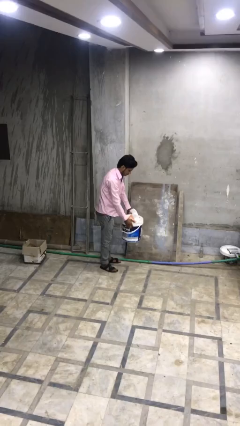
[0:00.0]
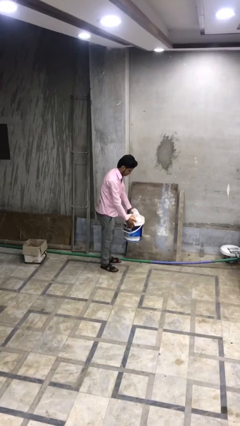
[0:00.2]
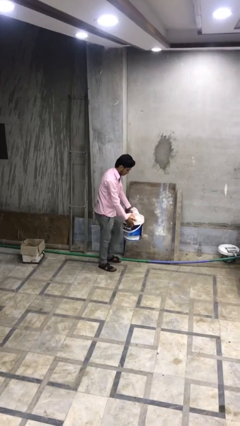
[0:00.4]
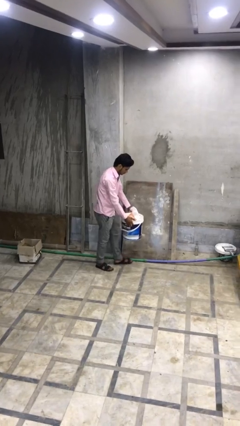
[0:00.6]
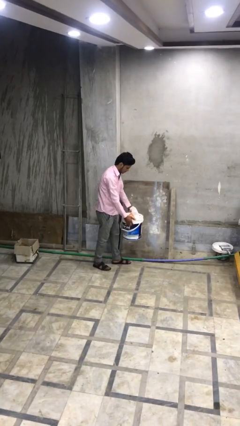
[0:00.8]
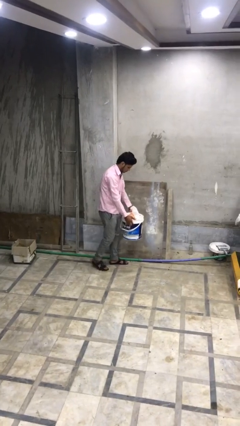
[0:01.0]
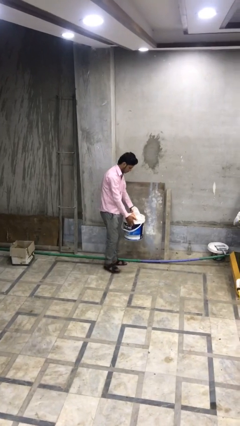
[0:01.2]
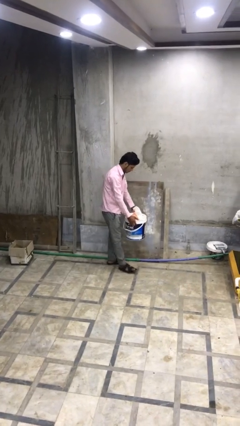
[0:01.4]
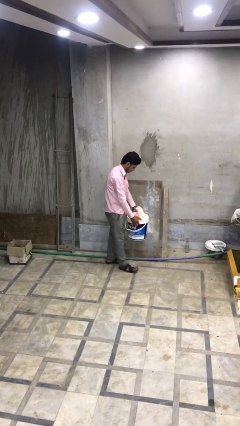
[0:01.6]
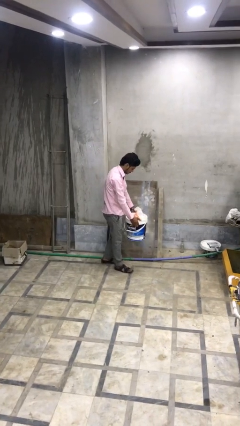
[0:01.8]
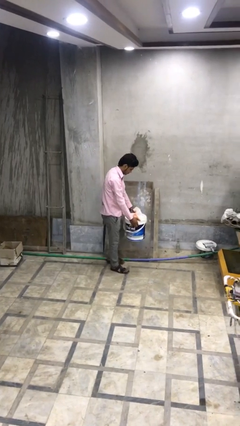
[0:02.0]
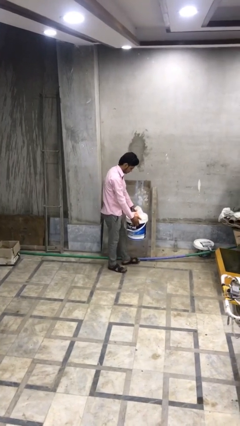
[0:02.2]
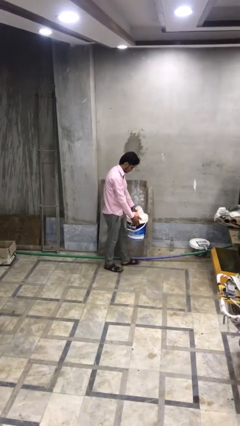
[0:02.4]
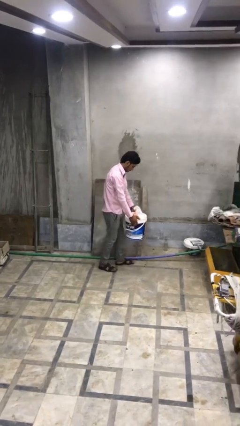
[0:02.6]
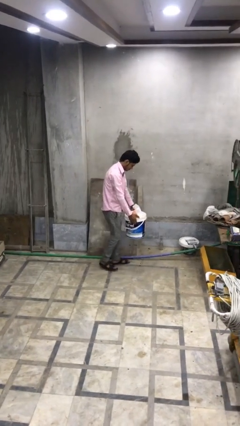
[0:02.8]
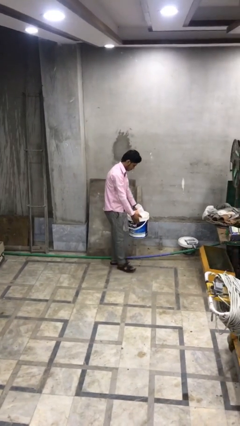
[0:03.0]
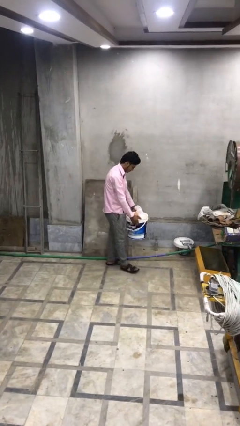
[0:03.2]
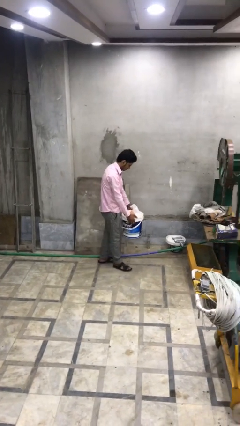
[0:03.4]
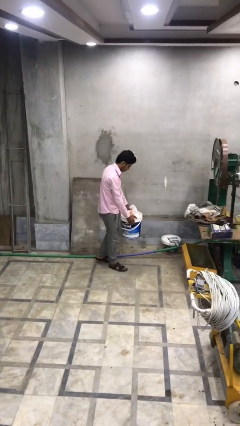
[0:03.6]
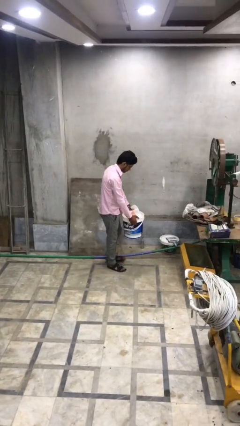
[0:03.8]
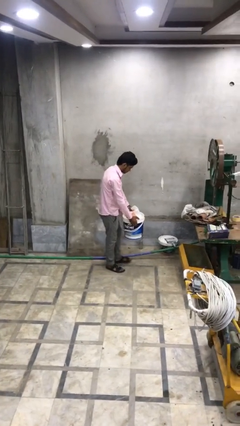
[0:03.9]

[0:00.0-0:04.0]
person carries heavy object

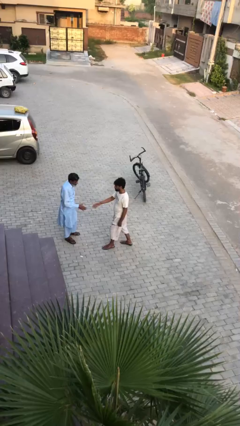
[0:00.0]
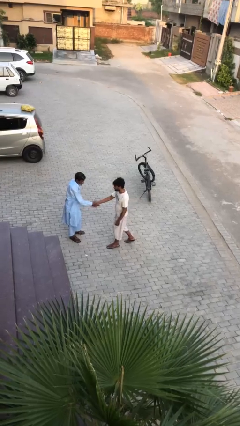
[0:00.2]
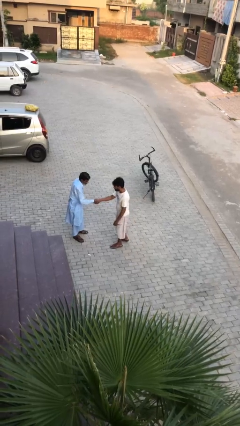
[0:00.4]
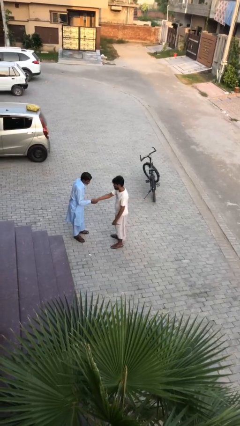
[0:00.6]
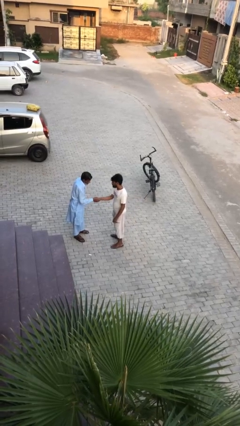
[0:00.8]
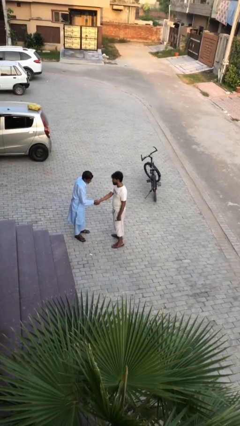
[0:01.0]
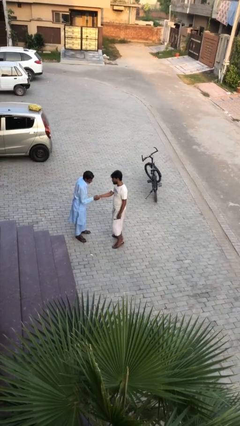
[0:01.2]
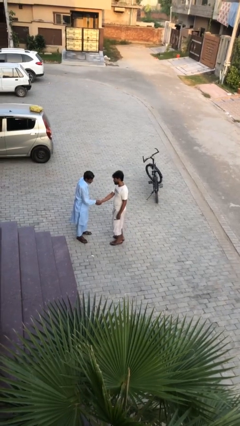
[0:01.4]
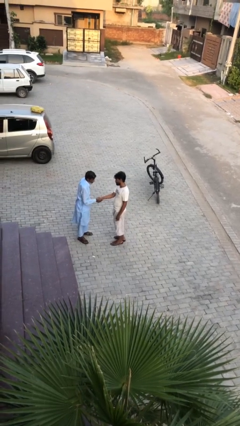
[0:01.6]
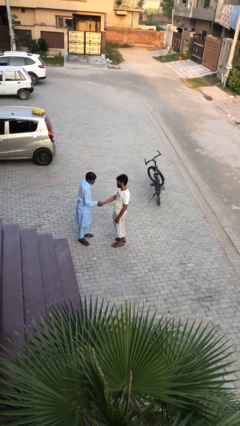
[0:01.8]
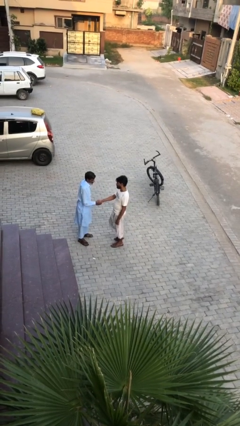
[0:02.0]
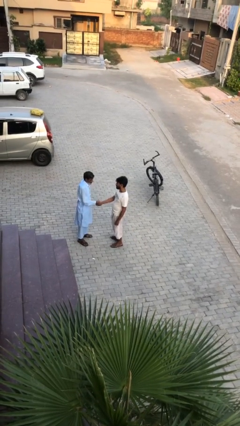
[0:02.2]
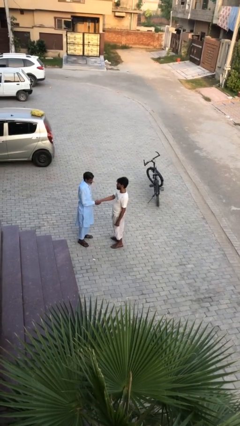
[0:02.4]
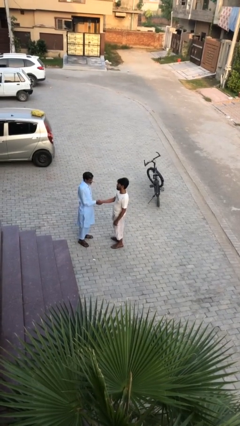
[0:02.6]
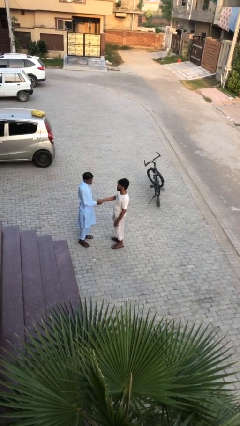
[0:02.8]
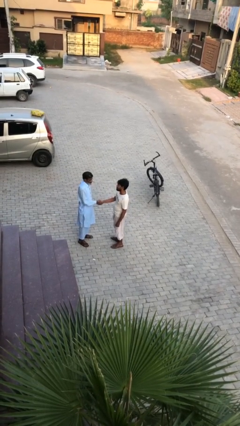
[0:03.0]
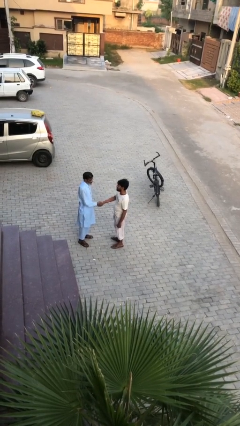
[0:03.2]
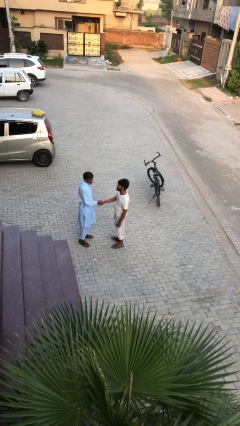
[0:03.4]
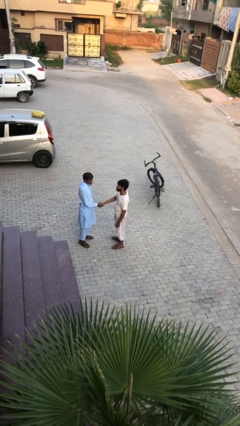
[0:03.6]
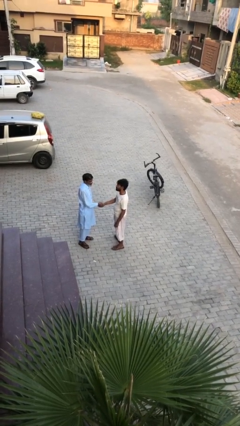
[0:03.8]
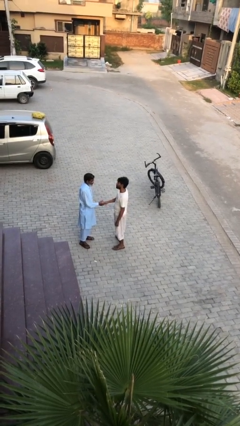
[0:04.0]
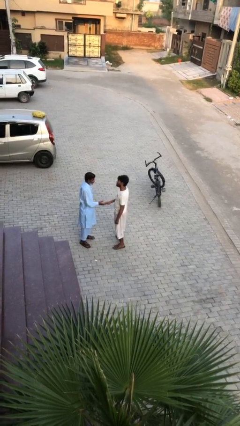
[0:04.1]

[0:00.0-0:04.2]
person shakes hand

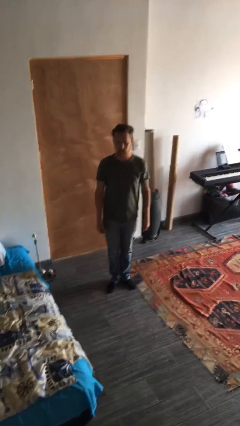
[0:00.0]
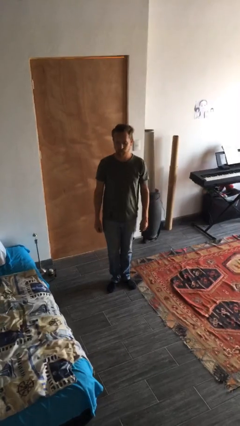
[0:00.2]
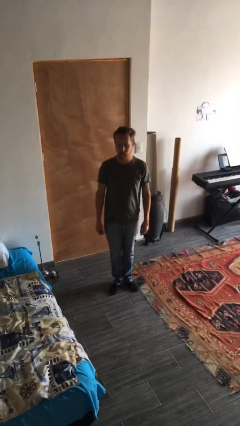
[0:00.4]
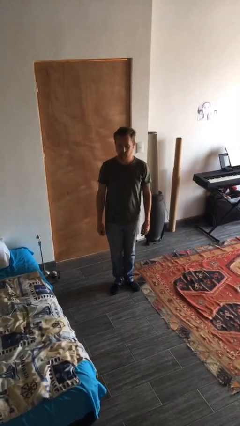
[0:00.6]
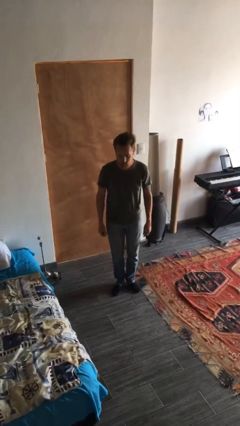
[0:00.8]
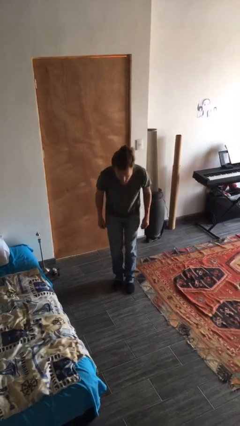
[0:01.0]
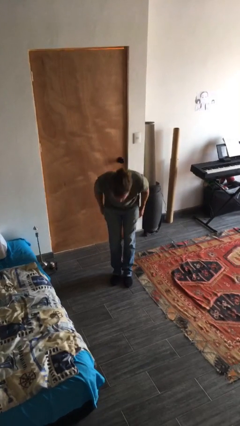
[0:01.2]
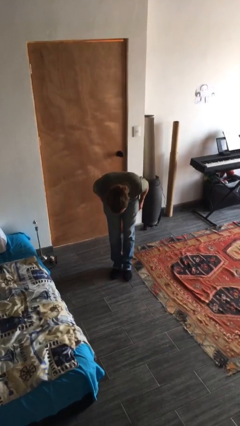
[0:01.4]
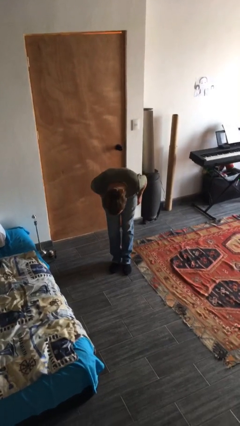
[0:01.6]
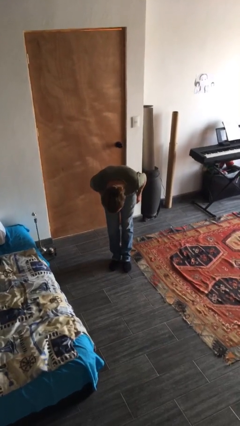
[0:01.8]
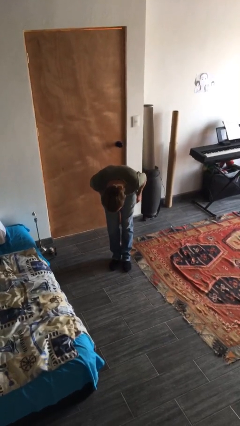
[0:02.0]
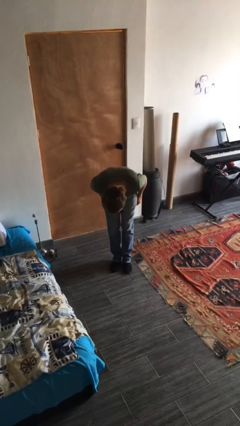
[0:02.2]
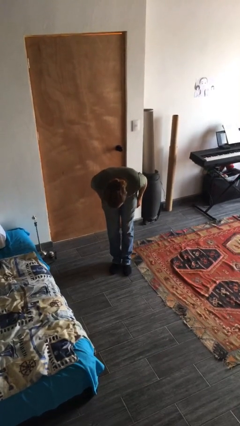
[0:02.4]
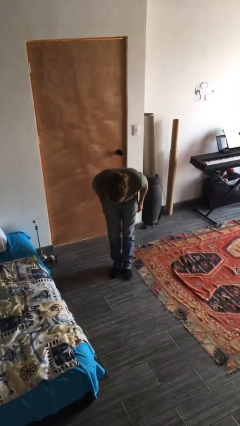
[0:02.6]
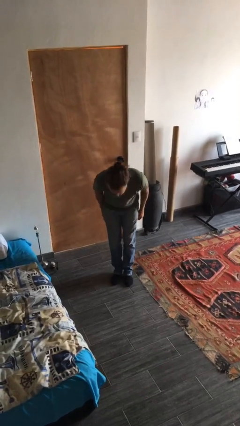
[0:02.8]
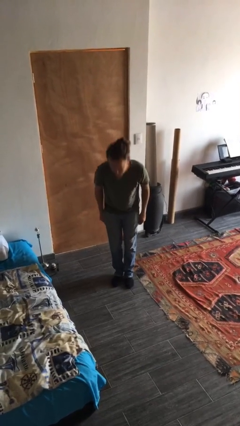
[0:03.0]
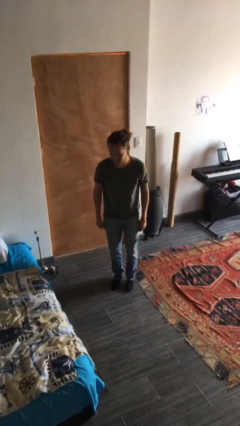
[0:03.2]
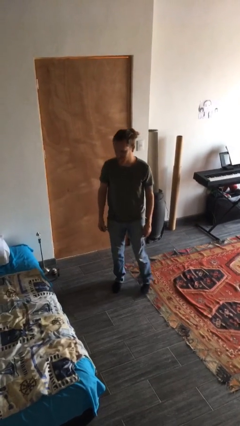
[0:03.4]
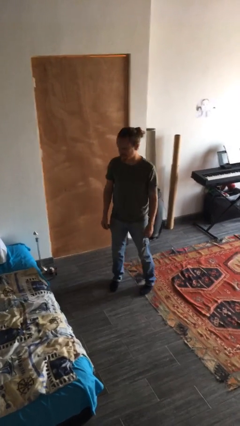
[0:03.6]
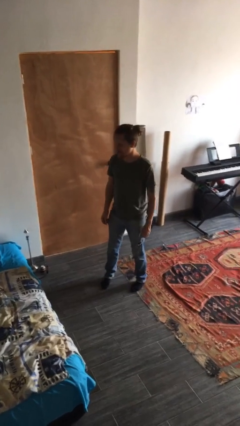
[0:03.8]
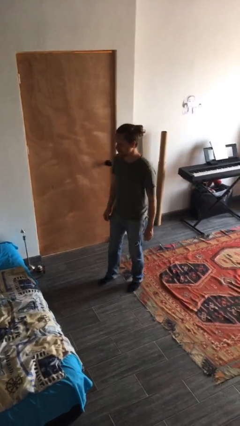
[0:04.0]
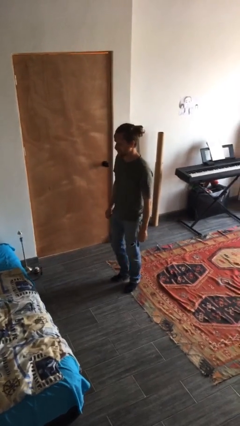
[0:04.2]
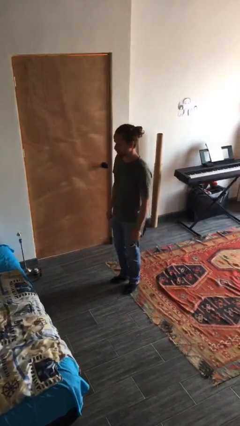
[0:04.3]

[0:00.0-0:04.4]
person bows

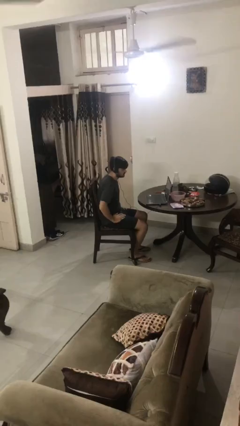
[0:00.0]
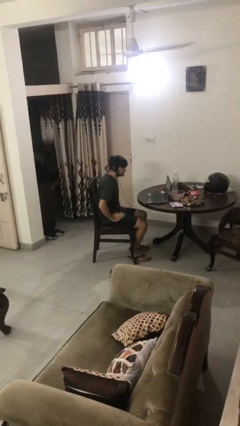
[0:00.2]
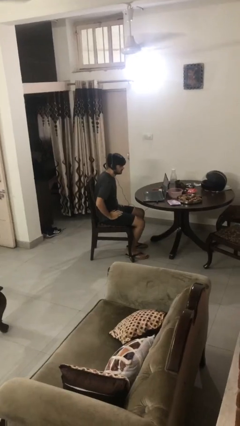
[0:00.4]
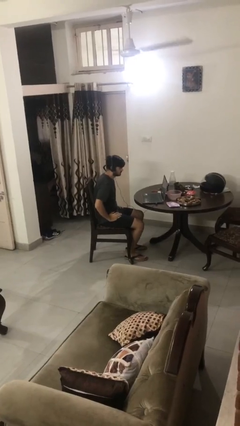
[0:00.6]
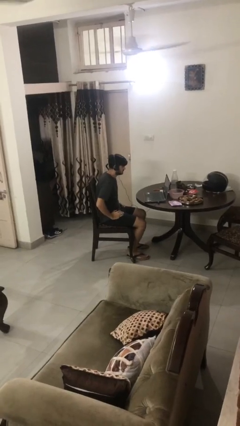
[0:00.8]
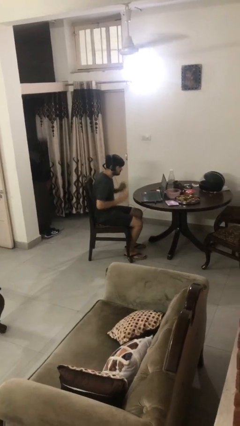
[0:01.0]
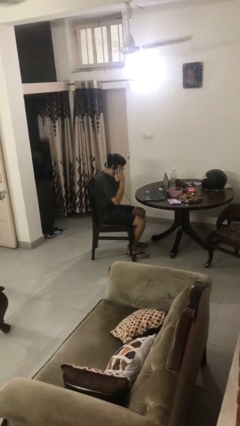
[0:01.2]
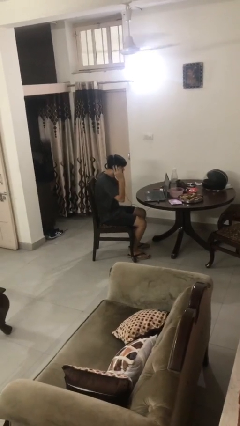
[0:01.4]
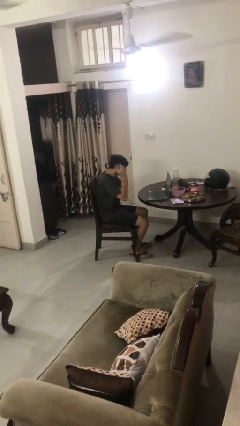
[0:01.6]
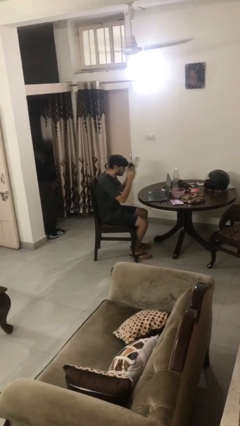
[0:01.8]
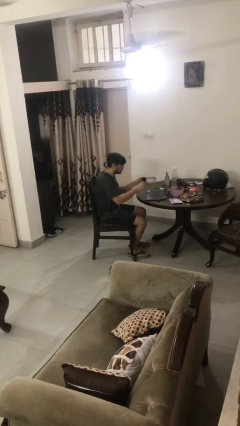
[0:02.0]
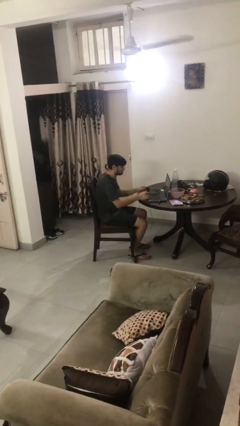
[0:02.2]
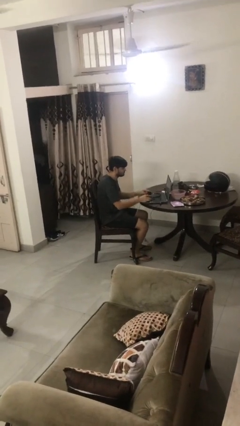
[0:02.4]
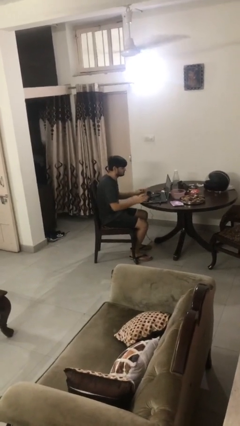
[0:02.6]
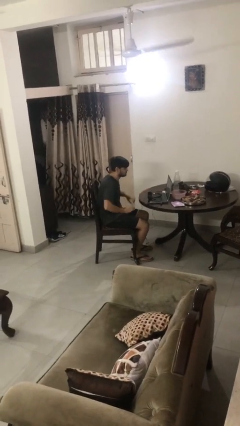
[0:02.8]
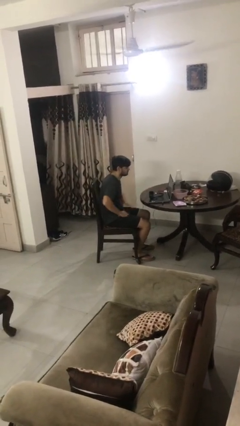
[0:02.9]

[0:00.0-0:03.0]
person takes off headphones

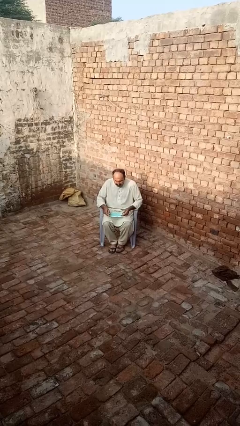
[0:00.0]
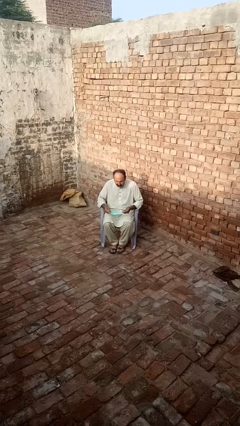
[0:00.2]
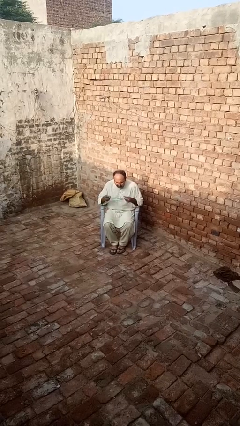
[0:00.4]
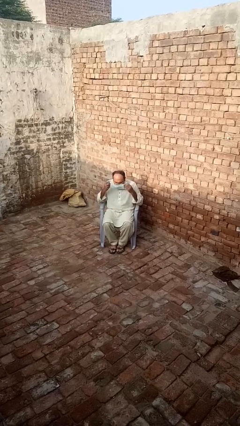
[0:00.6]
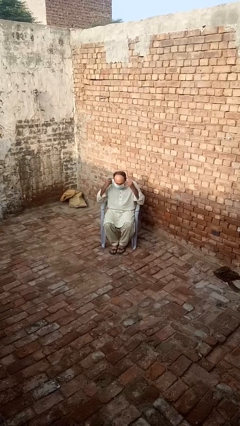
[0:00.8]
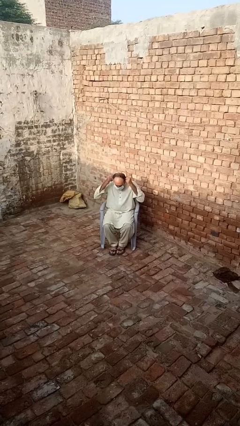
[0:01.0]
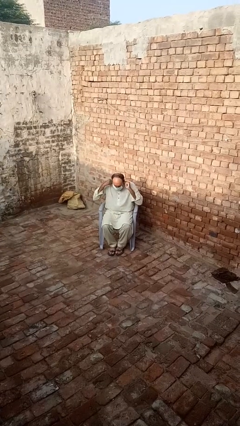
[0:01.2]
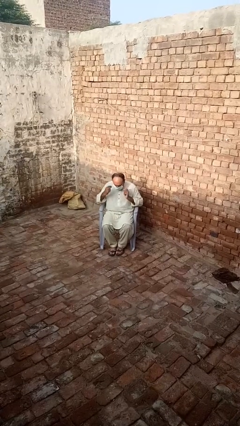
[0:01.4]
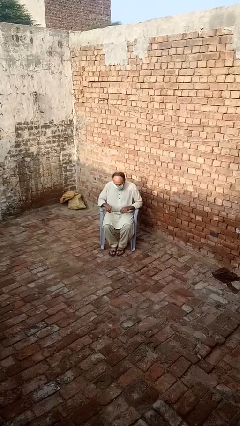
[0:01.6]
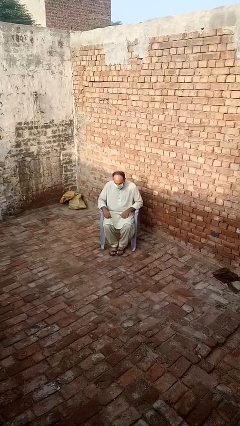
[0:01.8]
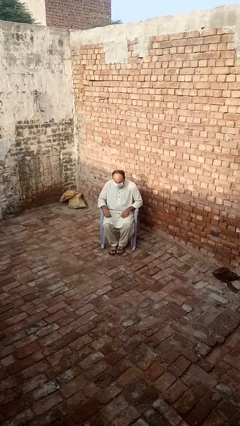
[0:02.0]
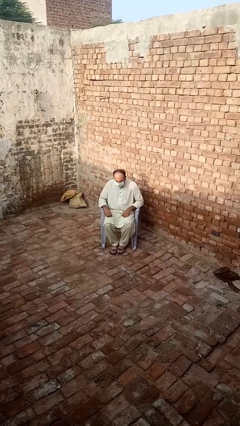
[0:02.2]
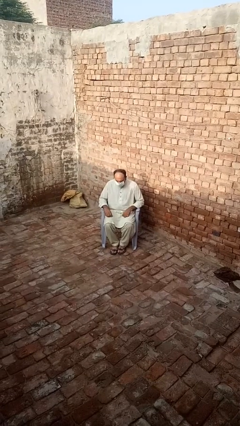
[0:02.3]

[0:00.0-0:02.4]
person puts on facemask
